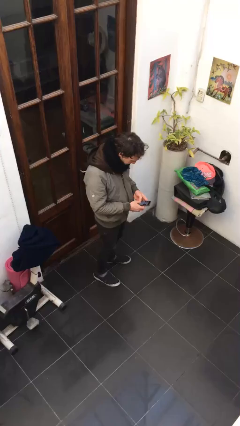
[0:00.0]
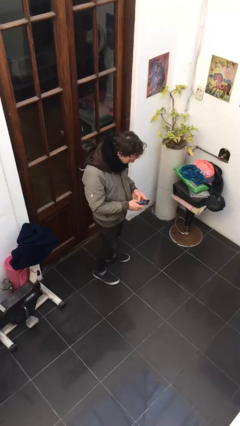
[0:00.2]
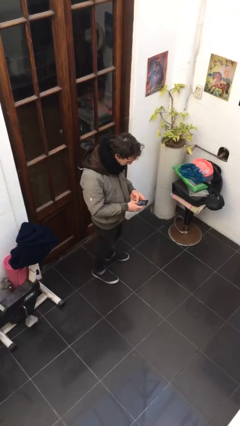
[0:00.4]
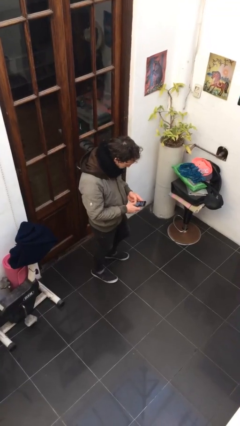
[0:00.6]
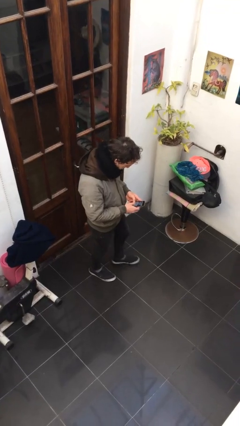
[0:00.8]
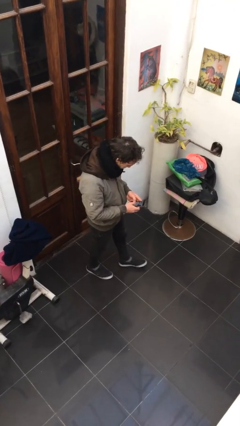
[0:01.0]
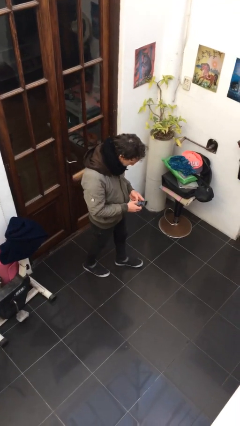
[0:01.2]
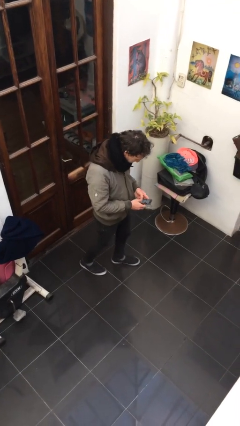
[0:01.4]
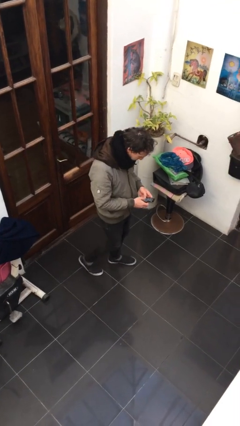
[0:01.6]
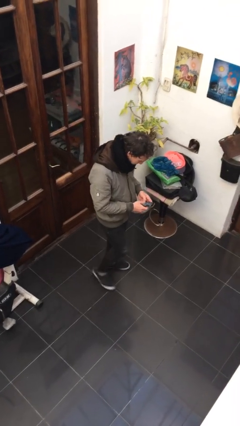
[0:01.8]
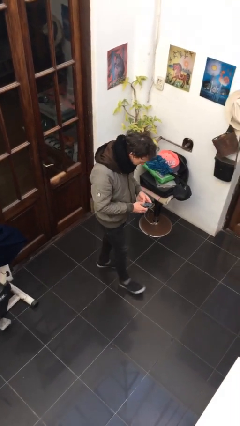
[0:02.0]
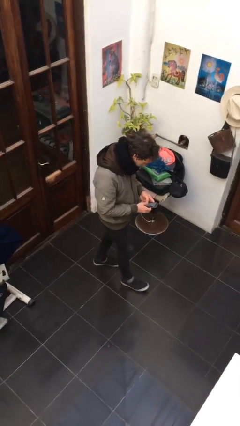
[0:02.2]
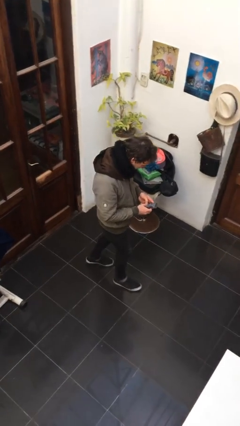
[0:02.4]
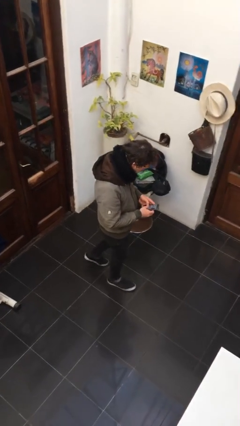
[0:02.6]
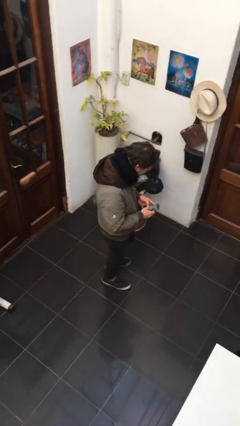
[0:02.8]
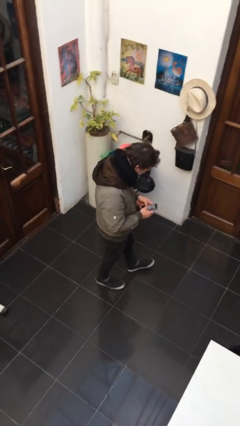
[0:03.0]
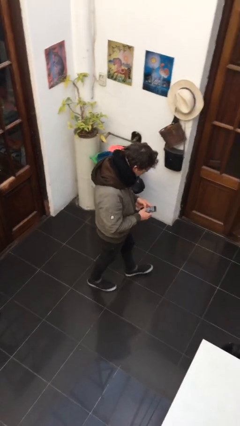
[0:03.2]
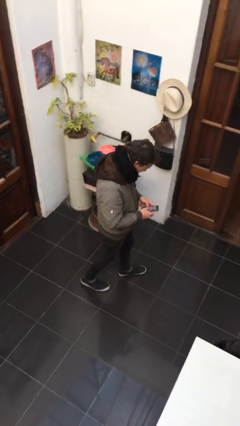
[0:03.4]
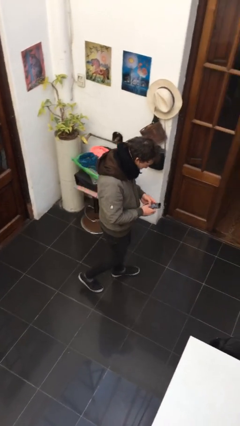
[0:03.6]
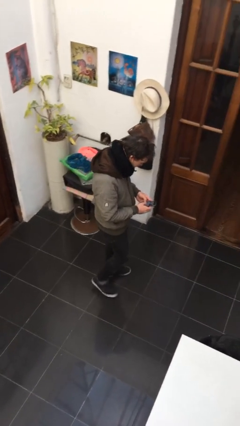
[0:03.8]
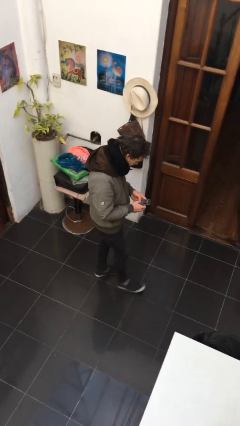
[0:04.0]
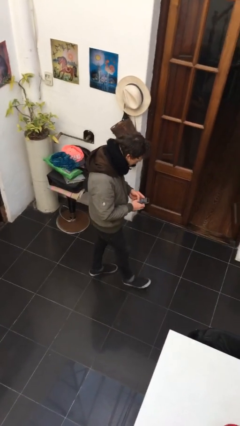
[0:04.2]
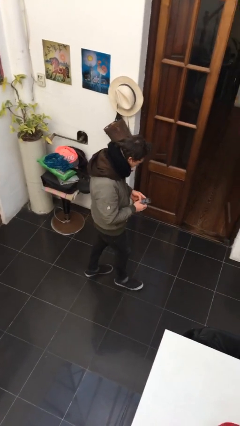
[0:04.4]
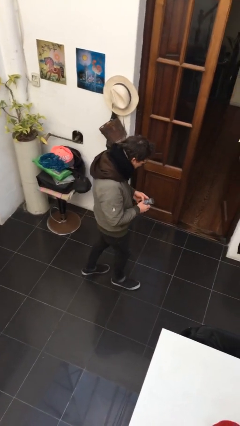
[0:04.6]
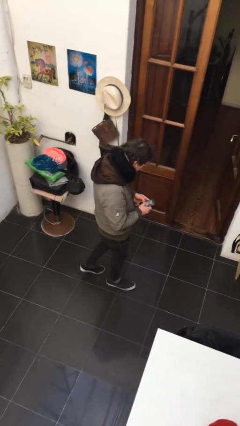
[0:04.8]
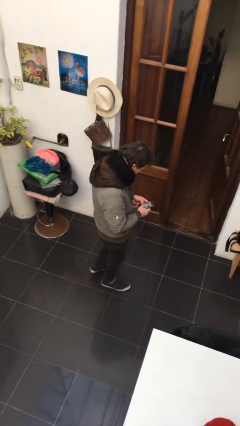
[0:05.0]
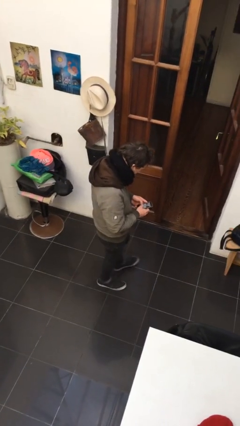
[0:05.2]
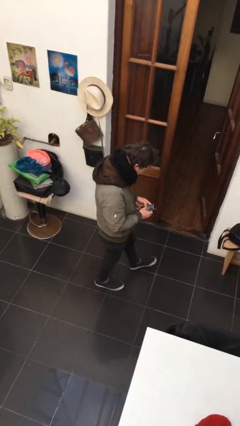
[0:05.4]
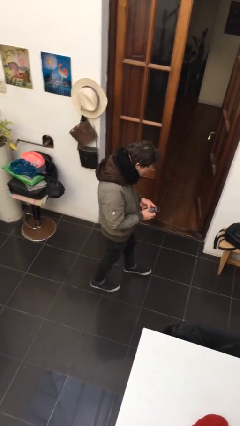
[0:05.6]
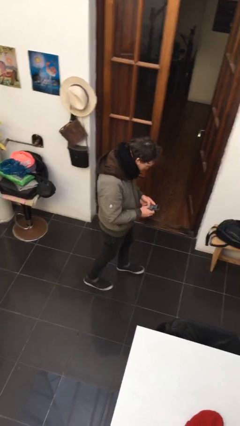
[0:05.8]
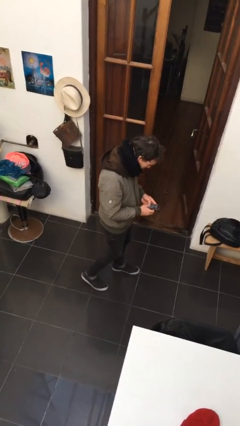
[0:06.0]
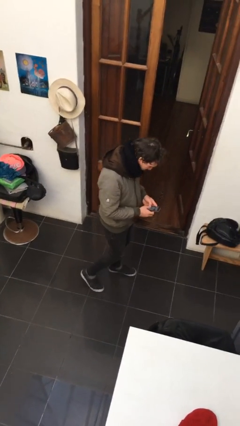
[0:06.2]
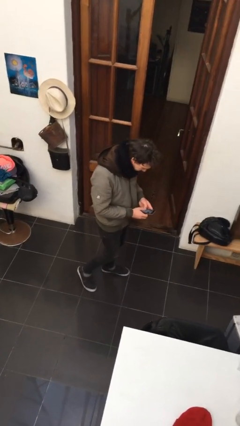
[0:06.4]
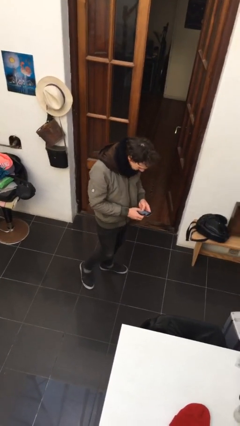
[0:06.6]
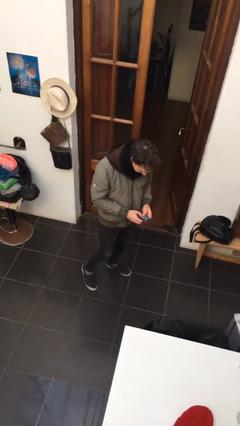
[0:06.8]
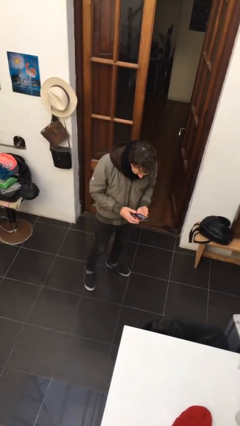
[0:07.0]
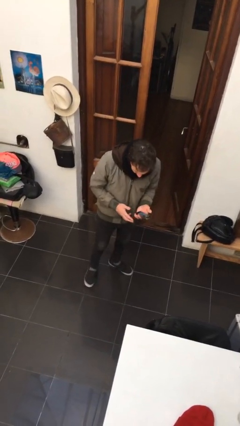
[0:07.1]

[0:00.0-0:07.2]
person texts on phone

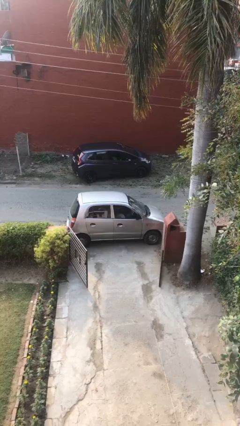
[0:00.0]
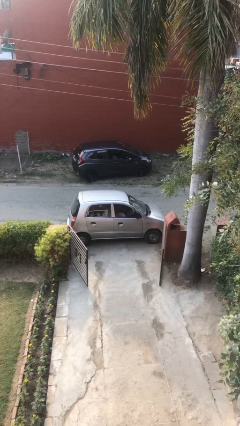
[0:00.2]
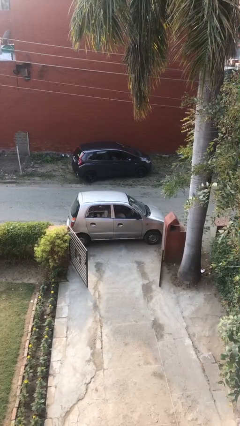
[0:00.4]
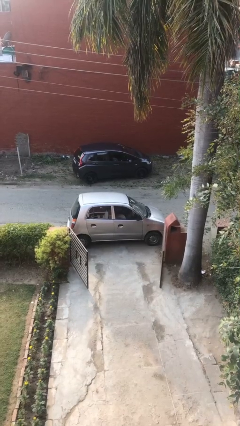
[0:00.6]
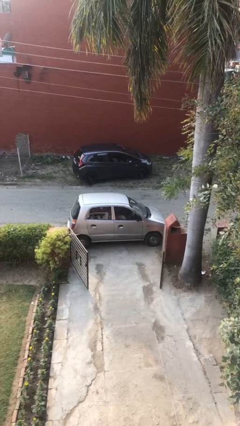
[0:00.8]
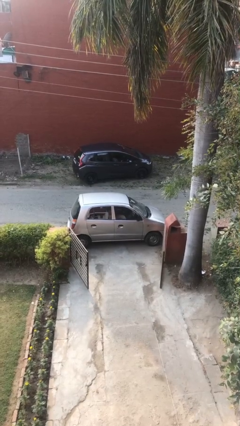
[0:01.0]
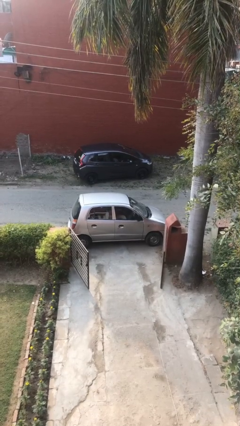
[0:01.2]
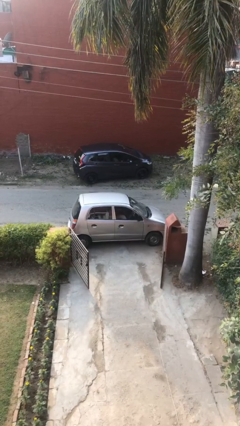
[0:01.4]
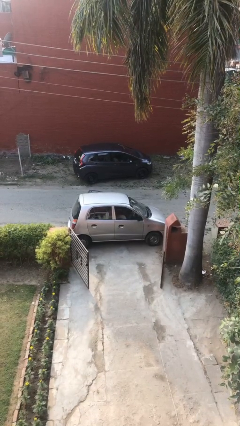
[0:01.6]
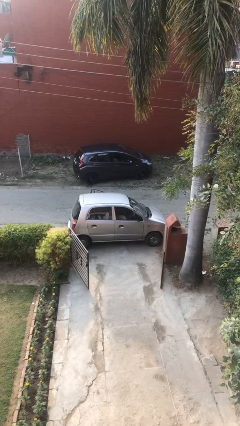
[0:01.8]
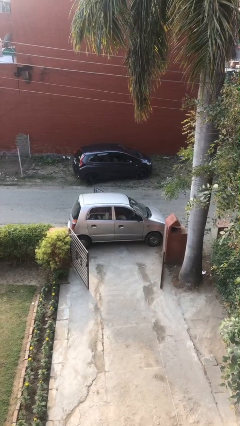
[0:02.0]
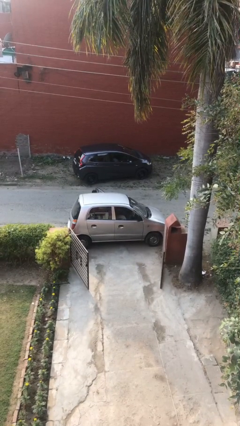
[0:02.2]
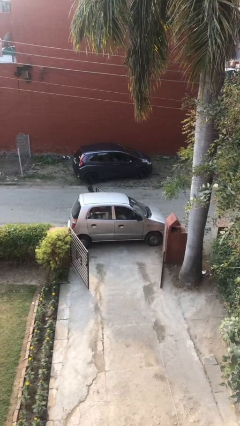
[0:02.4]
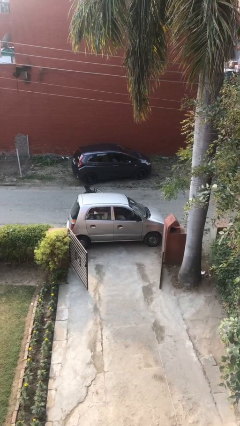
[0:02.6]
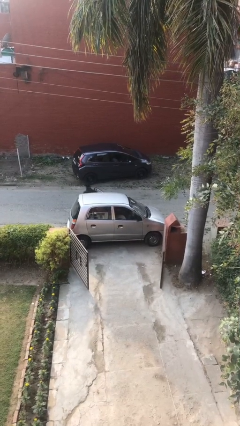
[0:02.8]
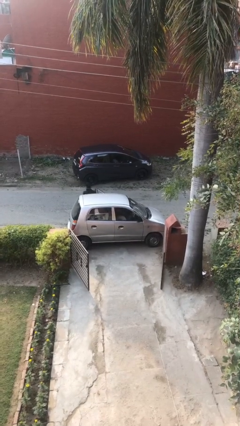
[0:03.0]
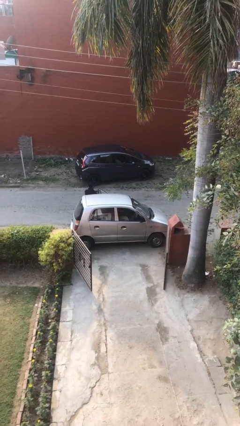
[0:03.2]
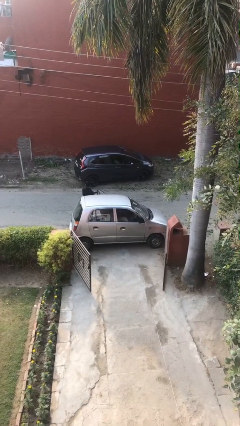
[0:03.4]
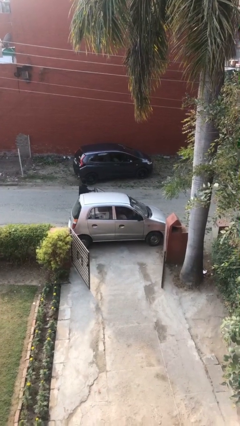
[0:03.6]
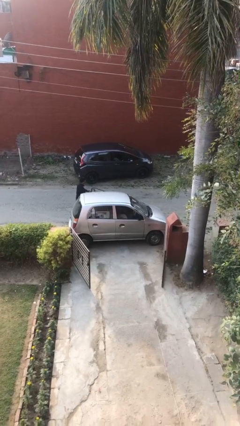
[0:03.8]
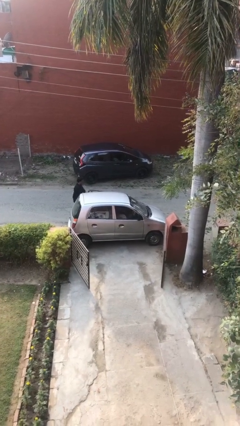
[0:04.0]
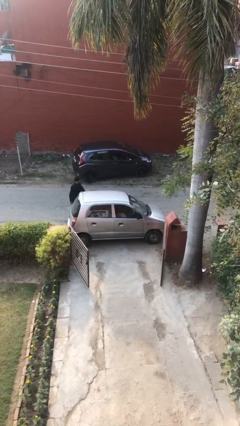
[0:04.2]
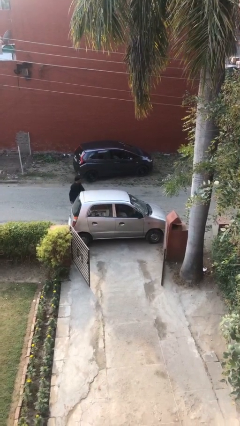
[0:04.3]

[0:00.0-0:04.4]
car drops off person

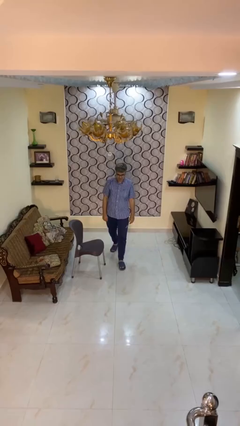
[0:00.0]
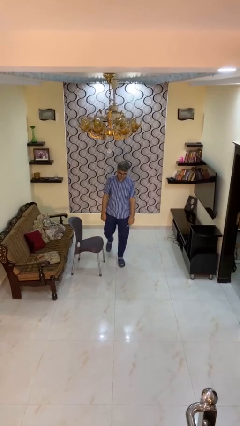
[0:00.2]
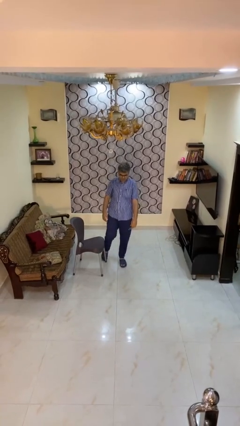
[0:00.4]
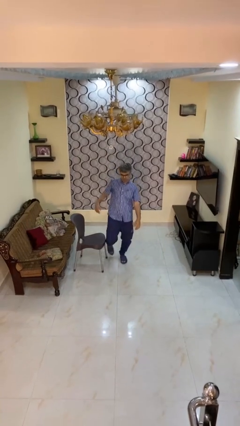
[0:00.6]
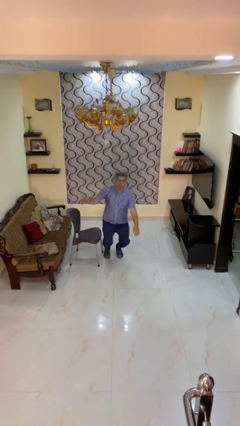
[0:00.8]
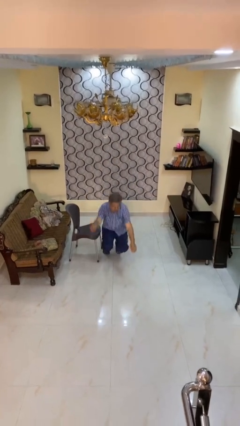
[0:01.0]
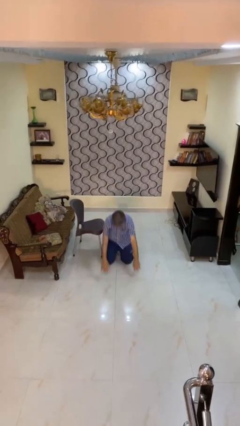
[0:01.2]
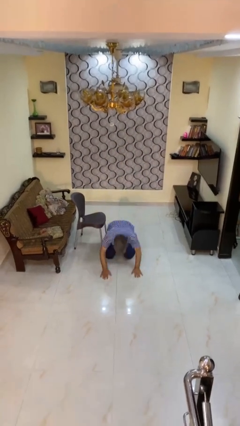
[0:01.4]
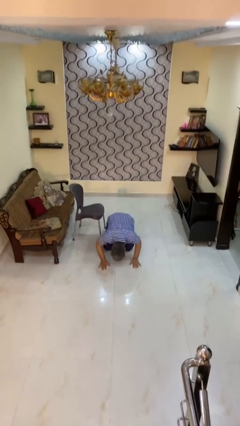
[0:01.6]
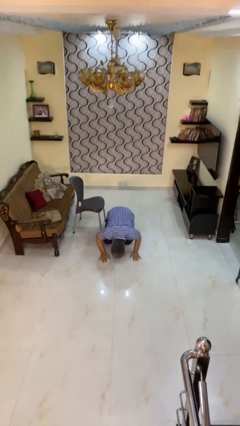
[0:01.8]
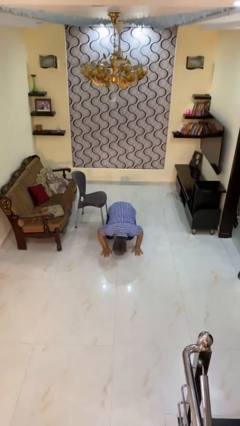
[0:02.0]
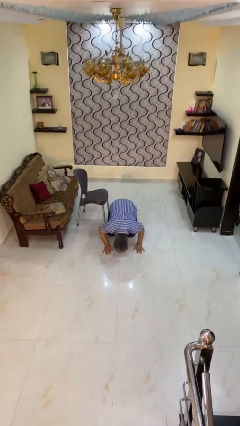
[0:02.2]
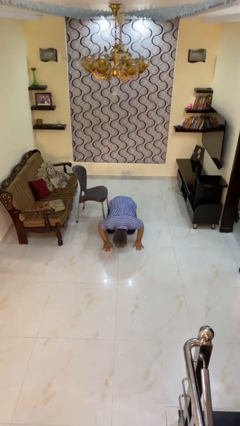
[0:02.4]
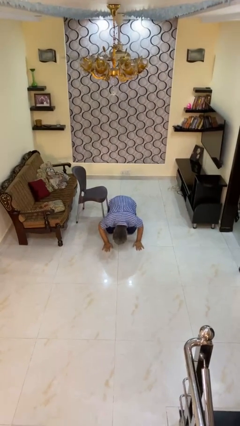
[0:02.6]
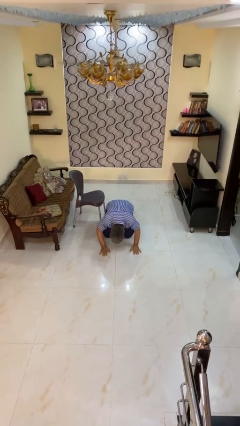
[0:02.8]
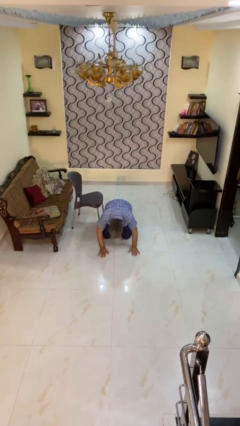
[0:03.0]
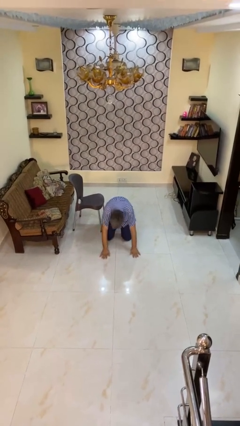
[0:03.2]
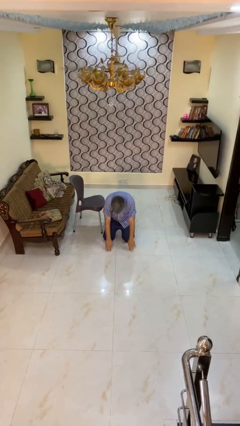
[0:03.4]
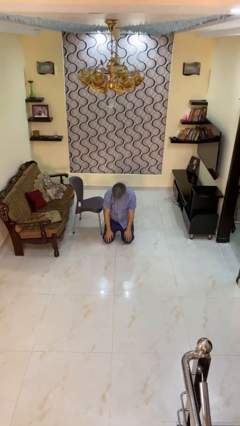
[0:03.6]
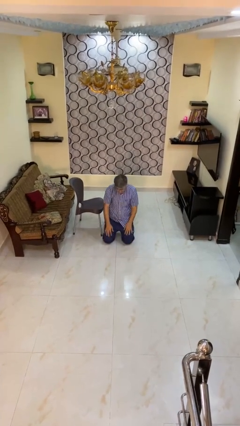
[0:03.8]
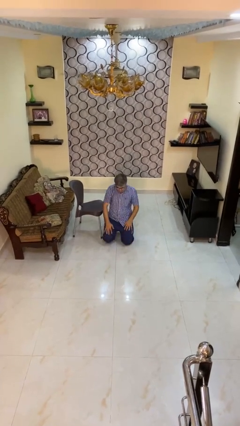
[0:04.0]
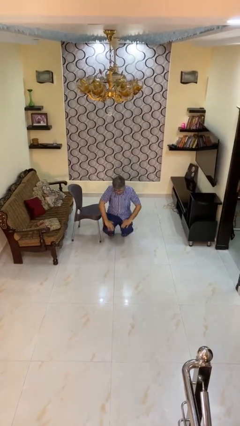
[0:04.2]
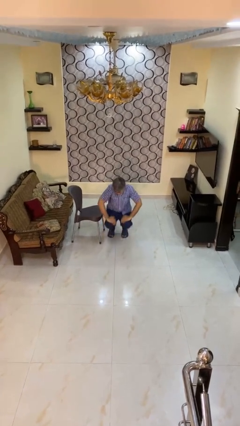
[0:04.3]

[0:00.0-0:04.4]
person trips on object on floor

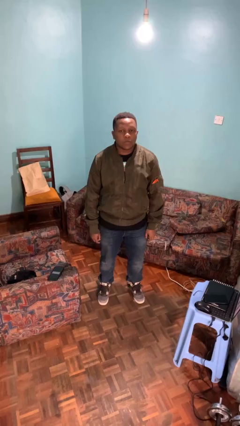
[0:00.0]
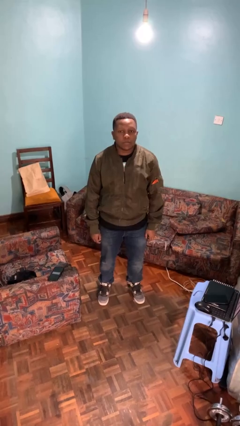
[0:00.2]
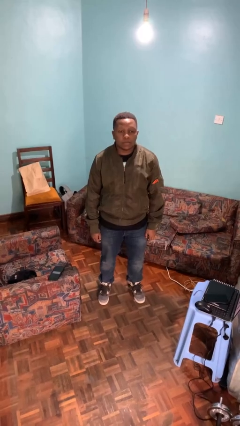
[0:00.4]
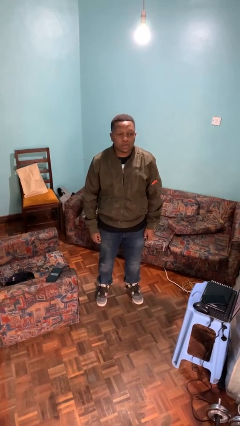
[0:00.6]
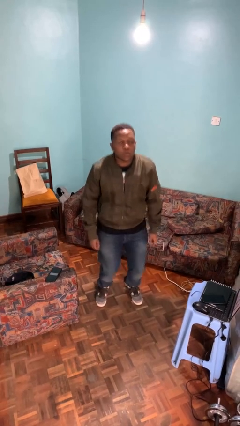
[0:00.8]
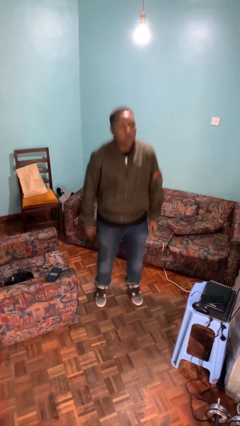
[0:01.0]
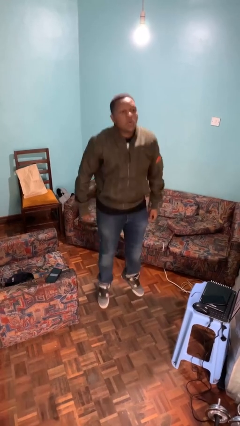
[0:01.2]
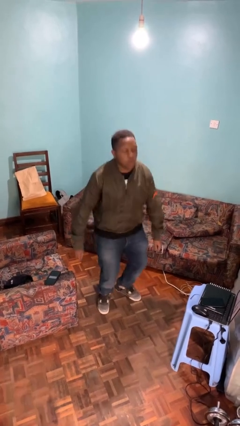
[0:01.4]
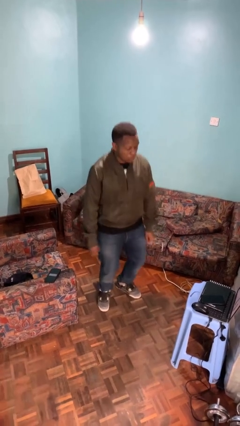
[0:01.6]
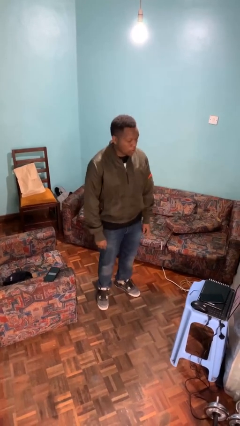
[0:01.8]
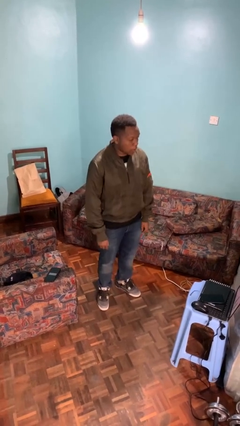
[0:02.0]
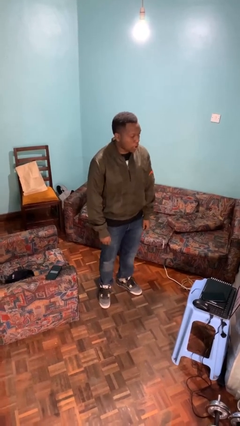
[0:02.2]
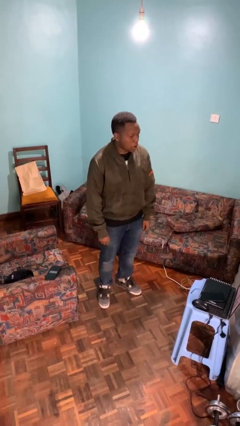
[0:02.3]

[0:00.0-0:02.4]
person jumps
